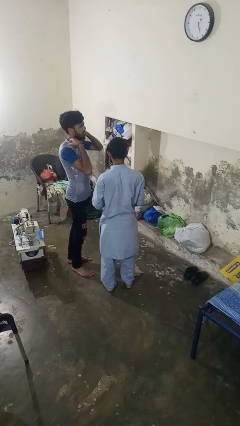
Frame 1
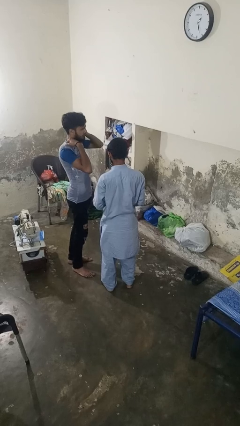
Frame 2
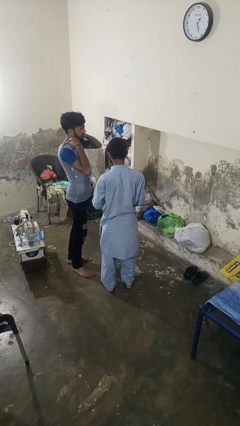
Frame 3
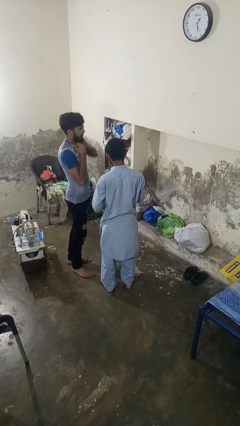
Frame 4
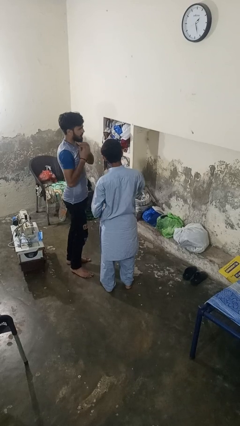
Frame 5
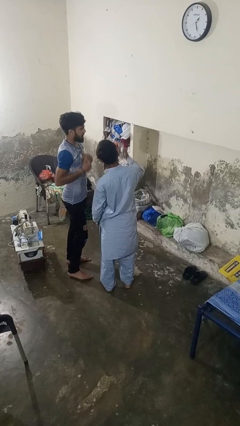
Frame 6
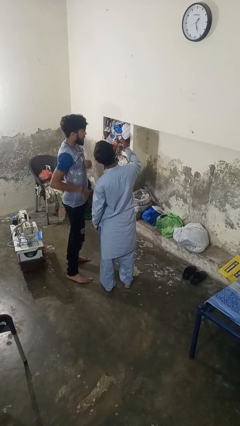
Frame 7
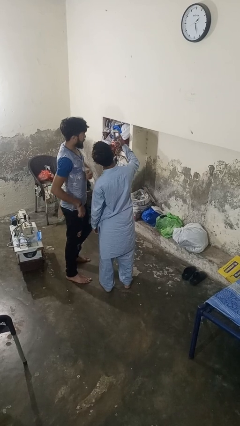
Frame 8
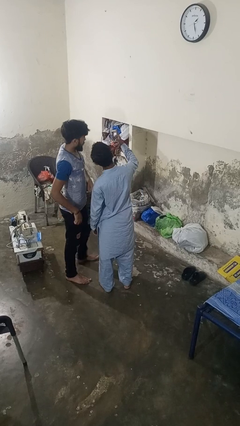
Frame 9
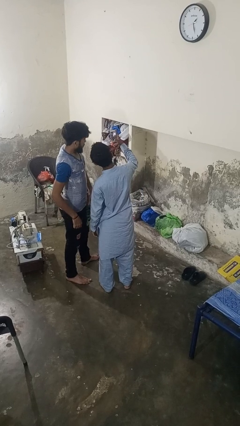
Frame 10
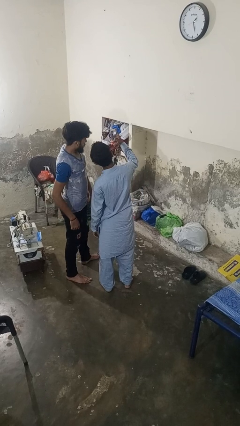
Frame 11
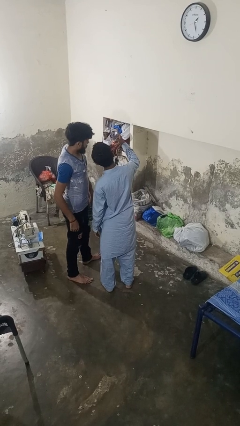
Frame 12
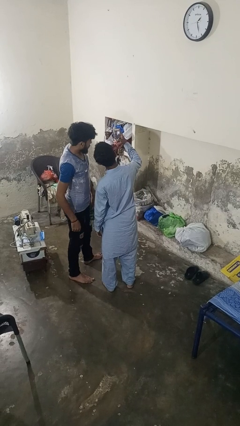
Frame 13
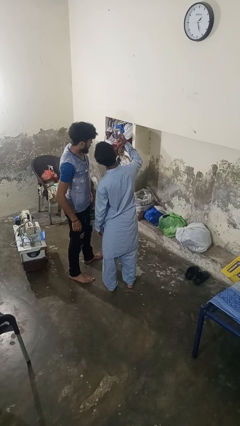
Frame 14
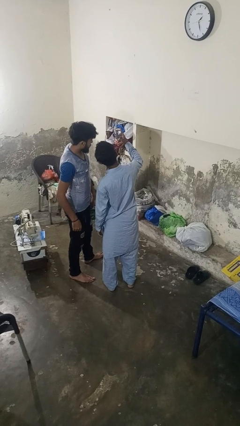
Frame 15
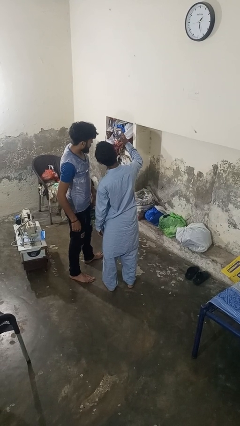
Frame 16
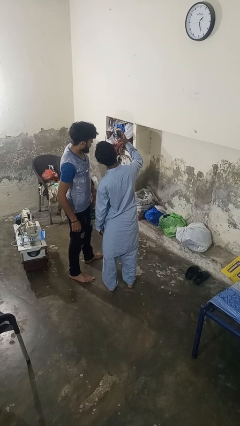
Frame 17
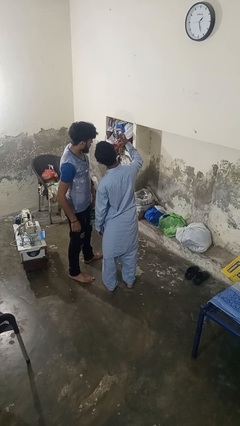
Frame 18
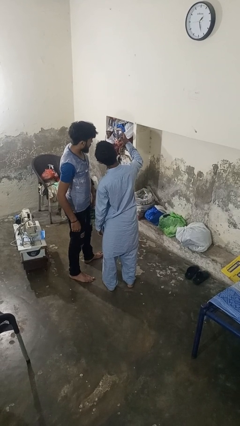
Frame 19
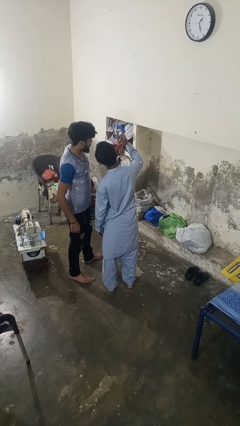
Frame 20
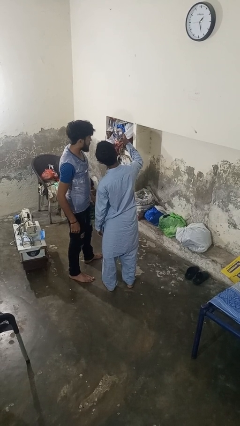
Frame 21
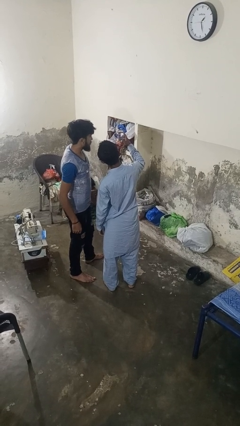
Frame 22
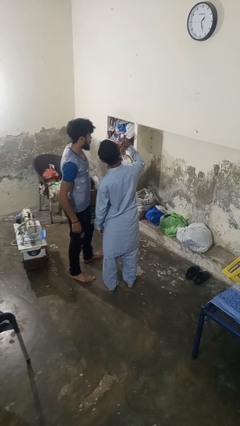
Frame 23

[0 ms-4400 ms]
person takes selfie with person

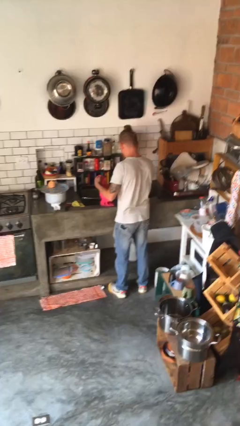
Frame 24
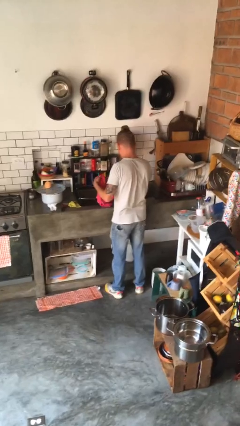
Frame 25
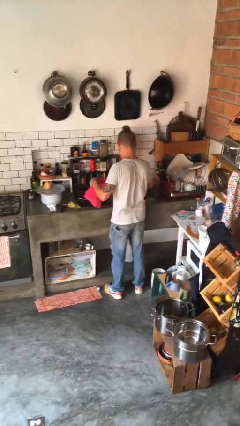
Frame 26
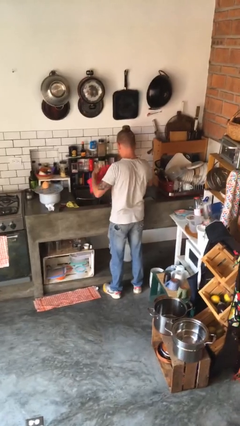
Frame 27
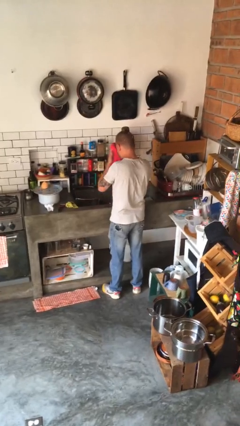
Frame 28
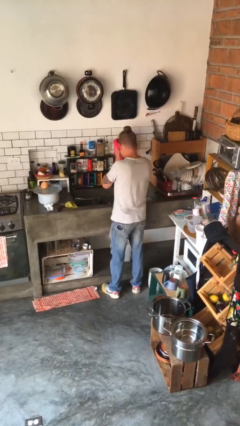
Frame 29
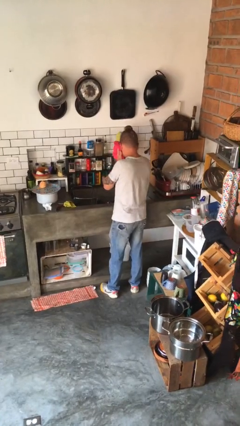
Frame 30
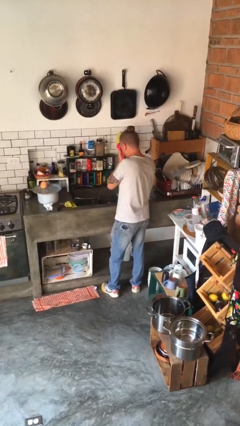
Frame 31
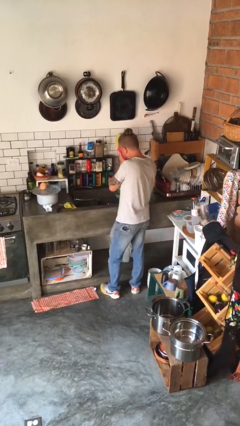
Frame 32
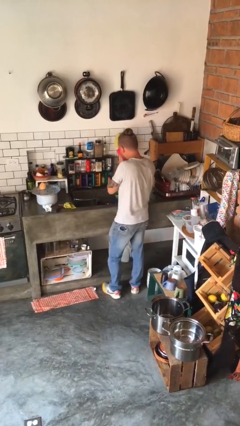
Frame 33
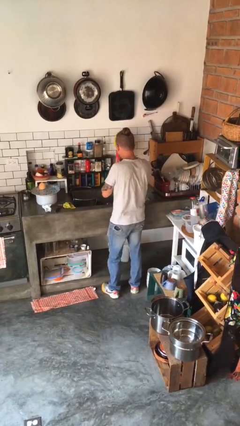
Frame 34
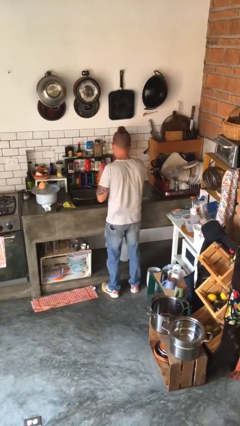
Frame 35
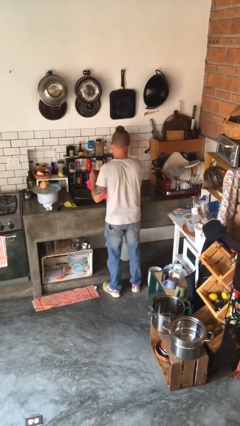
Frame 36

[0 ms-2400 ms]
person dries face with towel

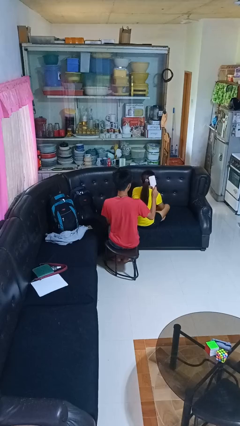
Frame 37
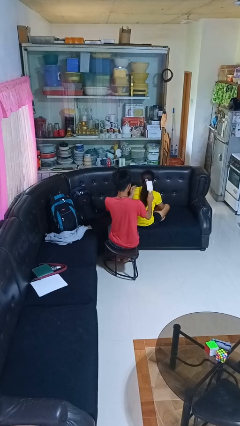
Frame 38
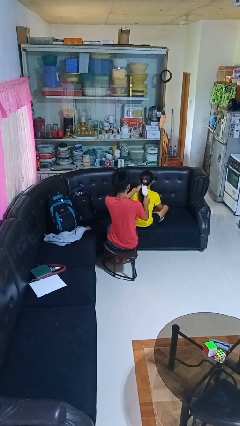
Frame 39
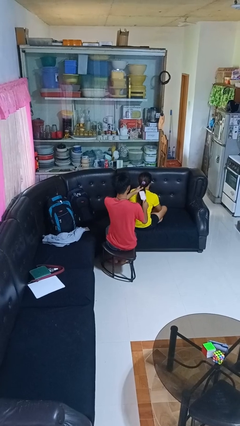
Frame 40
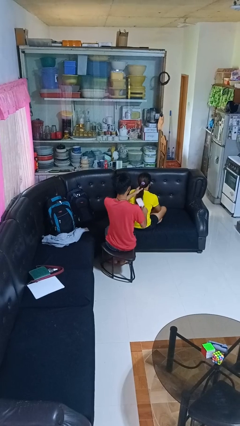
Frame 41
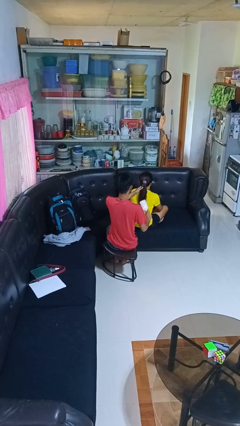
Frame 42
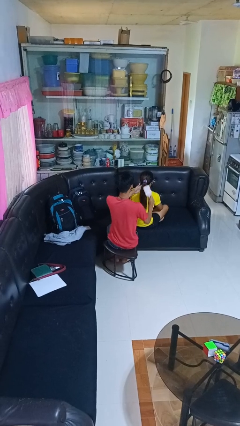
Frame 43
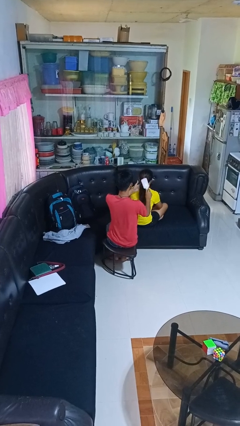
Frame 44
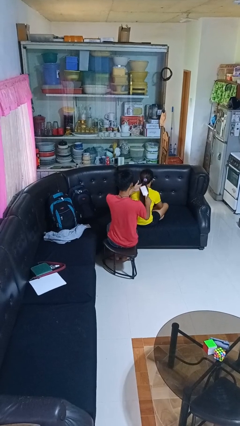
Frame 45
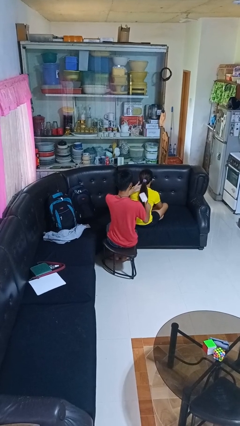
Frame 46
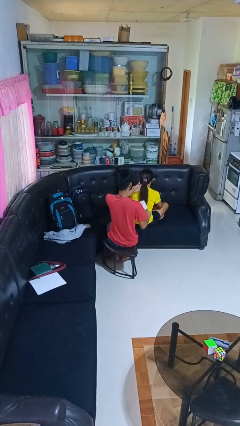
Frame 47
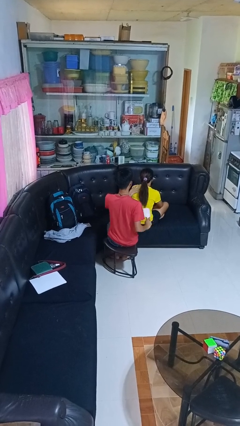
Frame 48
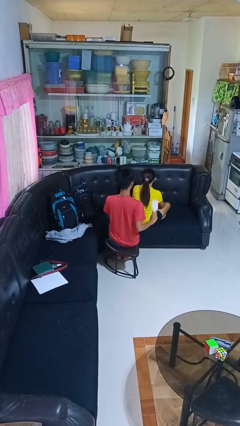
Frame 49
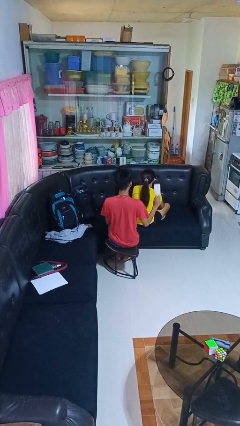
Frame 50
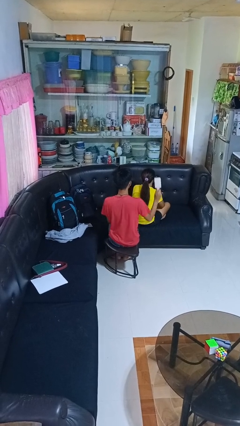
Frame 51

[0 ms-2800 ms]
person brushes hair of person

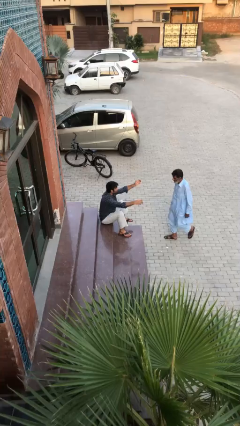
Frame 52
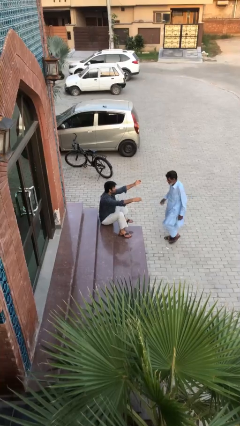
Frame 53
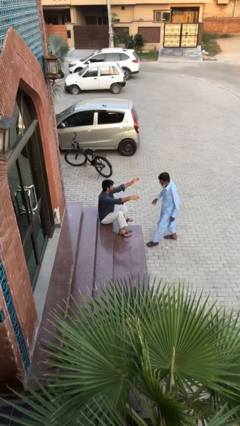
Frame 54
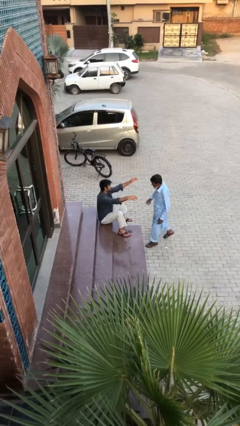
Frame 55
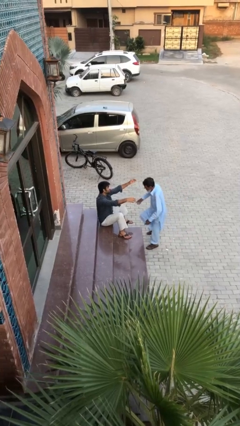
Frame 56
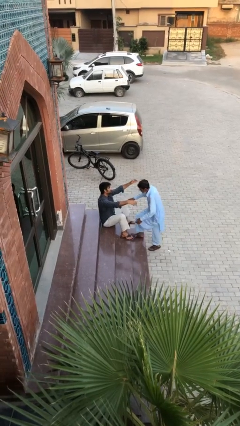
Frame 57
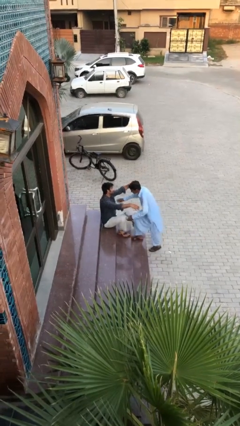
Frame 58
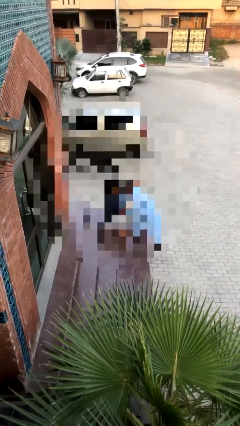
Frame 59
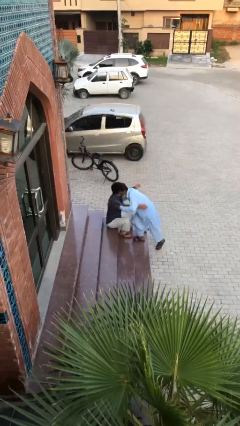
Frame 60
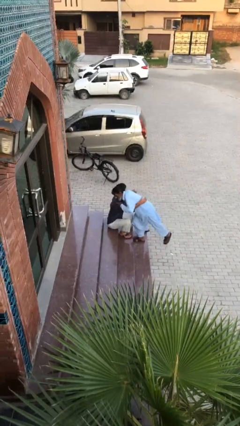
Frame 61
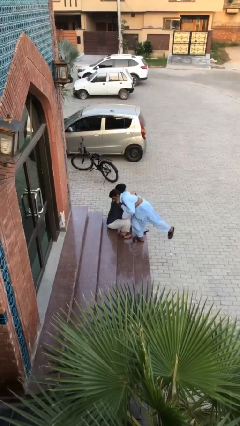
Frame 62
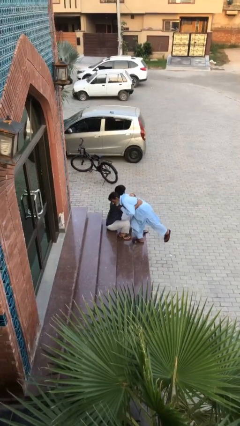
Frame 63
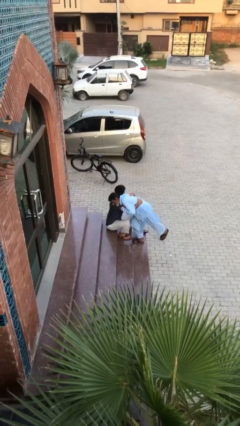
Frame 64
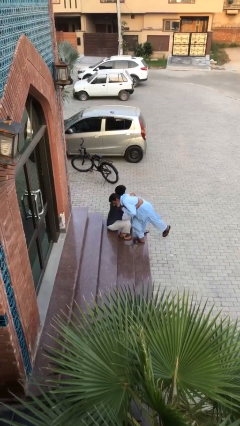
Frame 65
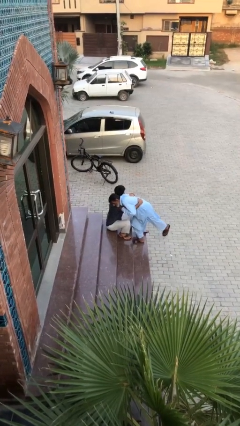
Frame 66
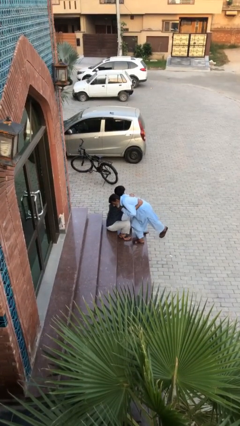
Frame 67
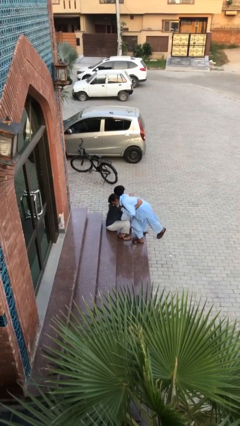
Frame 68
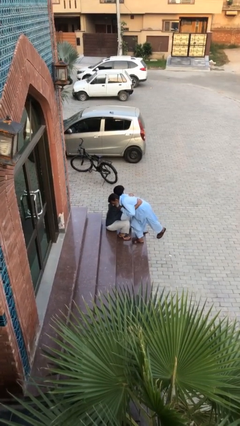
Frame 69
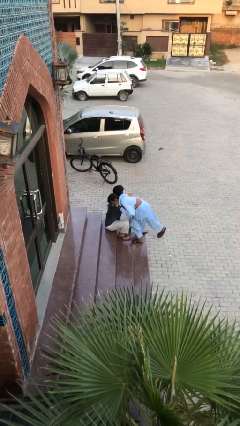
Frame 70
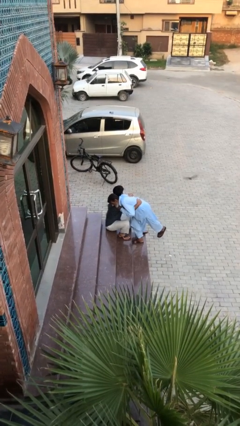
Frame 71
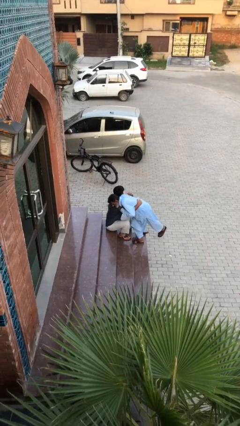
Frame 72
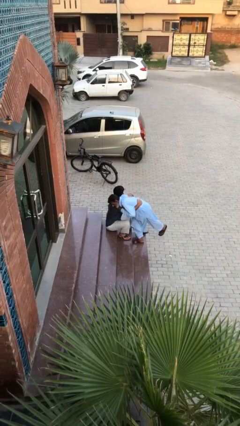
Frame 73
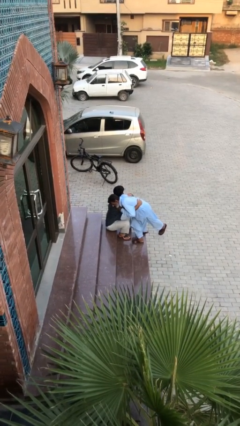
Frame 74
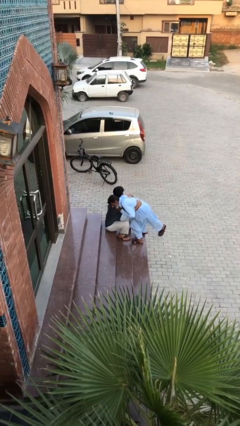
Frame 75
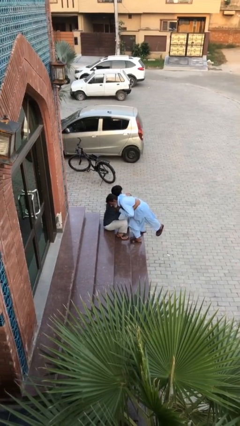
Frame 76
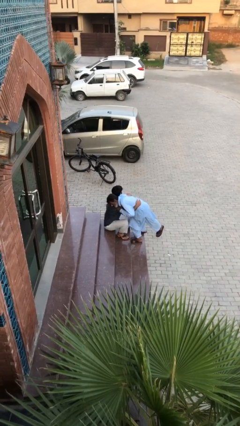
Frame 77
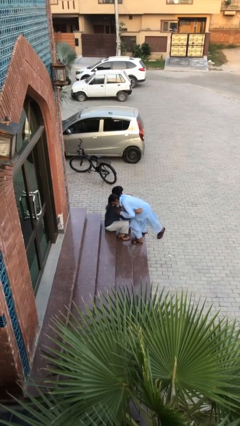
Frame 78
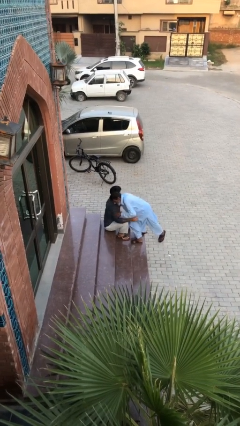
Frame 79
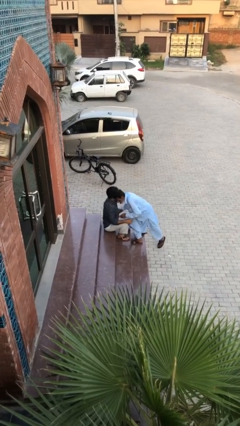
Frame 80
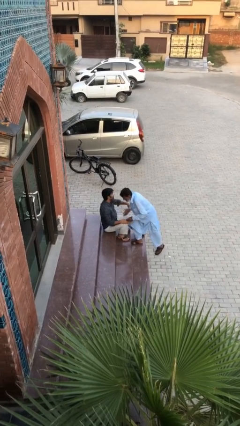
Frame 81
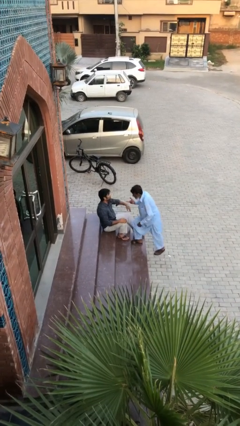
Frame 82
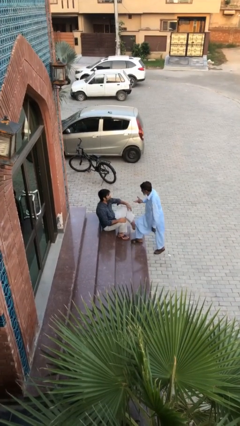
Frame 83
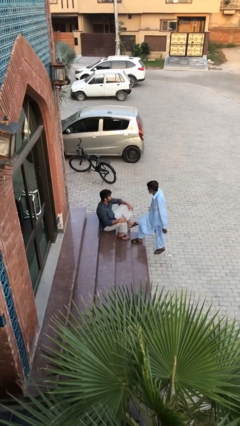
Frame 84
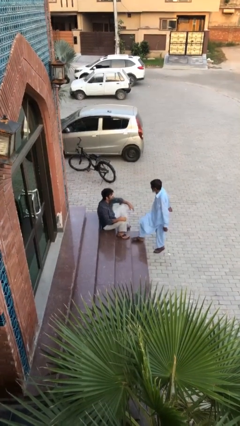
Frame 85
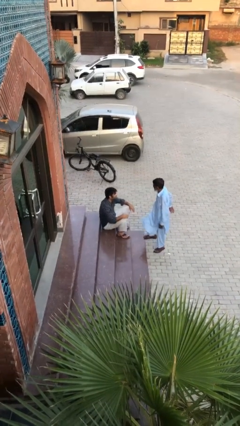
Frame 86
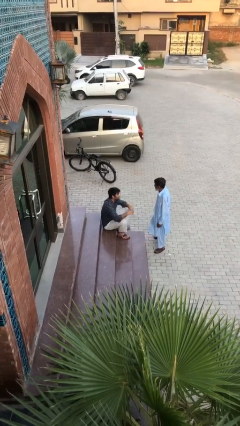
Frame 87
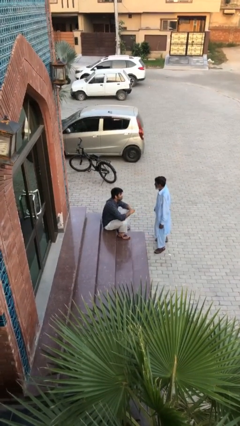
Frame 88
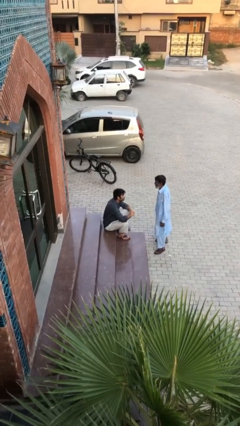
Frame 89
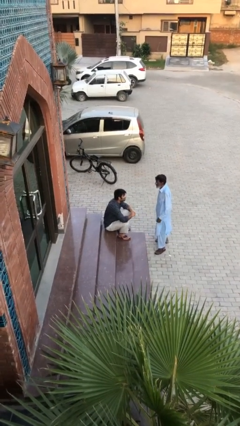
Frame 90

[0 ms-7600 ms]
person embraces person

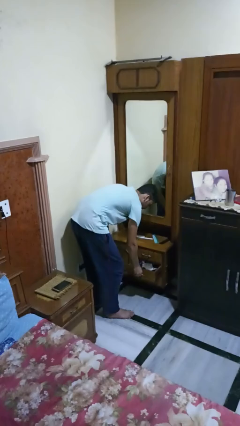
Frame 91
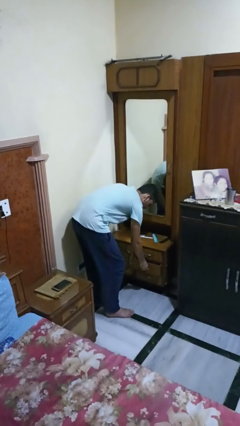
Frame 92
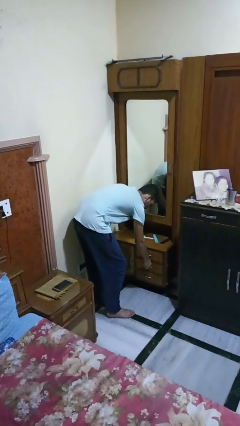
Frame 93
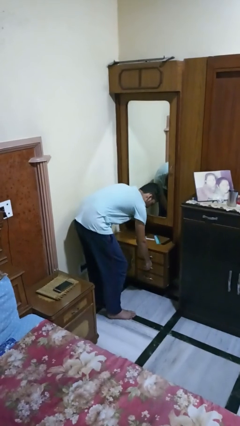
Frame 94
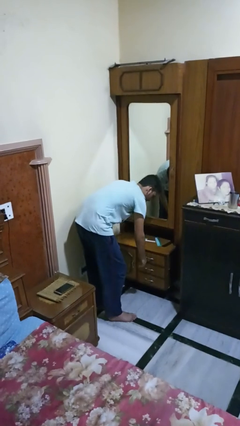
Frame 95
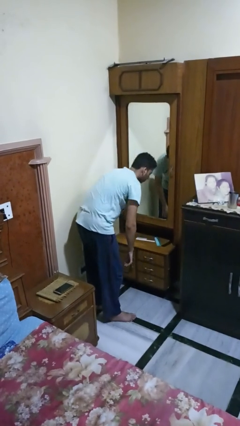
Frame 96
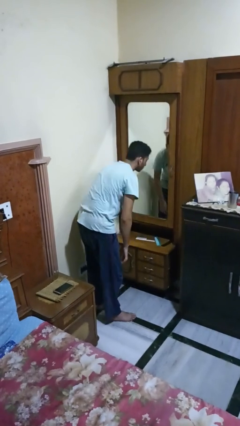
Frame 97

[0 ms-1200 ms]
person closes dresser drawer
